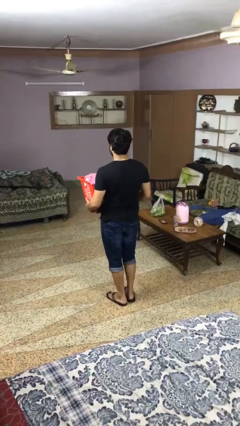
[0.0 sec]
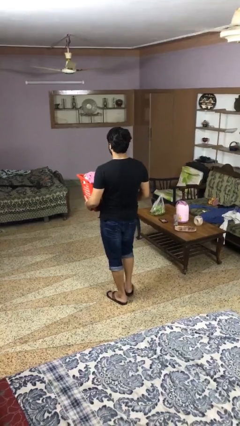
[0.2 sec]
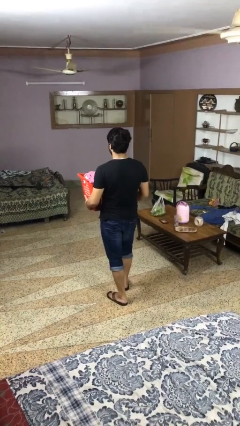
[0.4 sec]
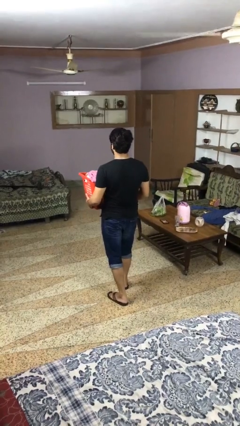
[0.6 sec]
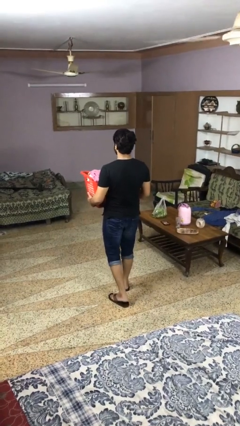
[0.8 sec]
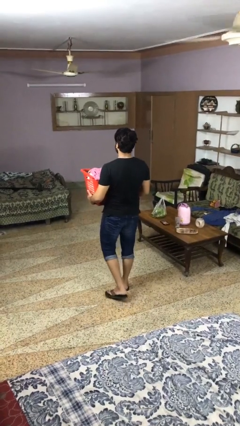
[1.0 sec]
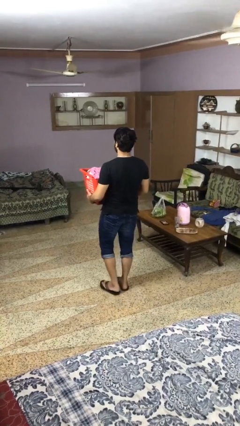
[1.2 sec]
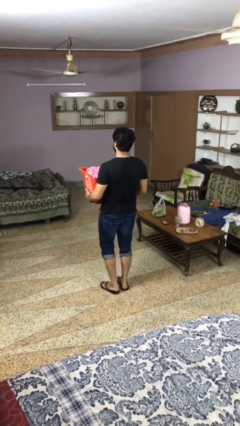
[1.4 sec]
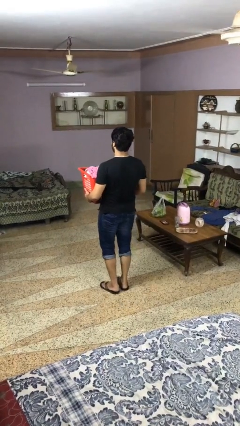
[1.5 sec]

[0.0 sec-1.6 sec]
person carries laundry basket

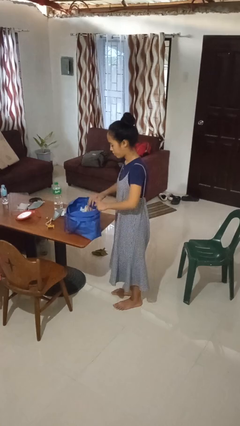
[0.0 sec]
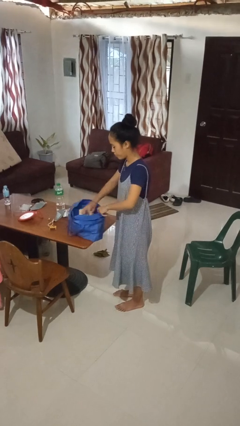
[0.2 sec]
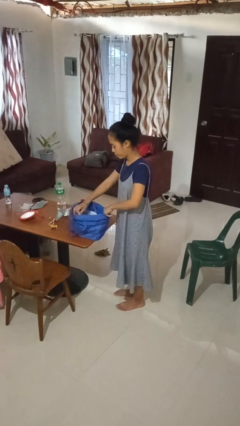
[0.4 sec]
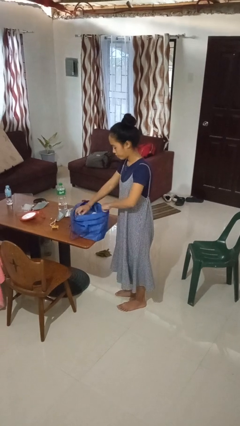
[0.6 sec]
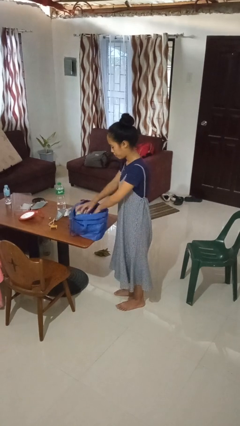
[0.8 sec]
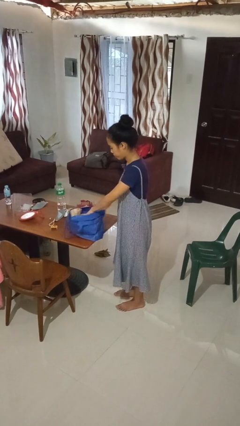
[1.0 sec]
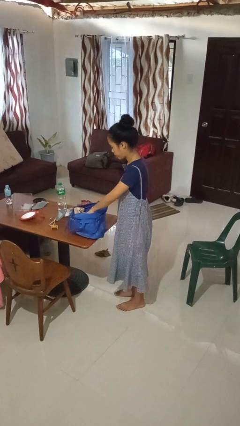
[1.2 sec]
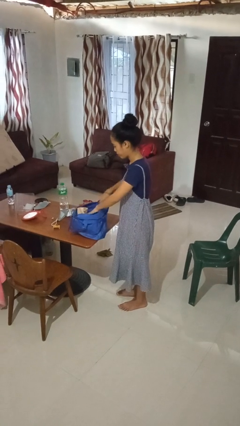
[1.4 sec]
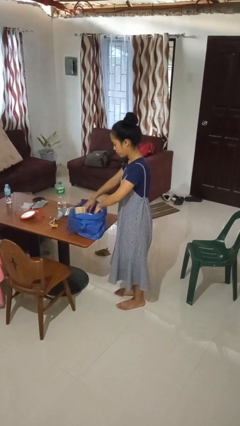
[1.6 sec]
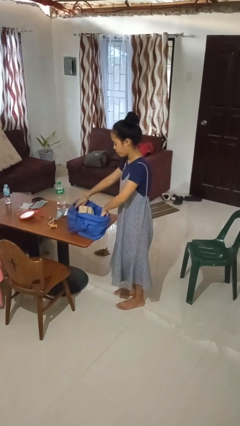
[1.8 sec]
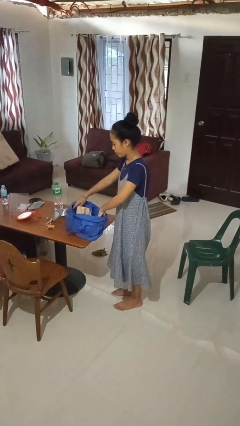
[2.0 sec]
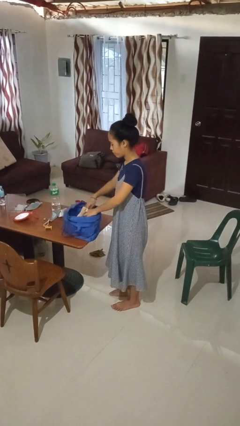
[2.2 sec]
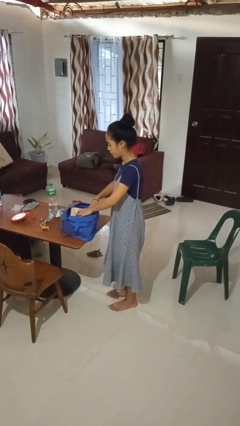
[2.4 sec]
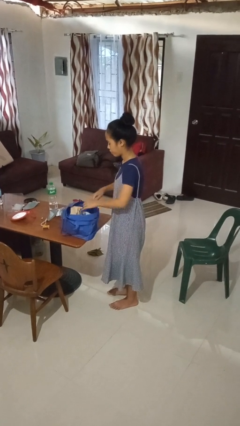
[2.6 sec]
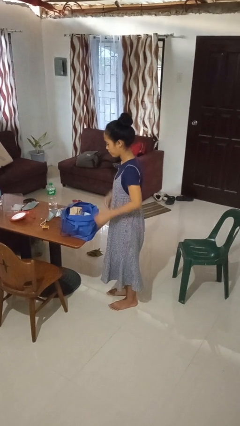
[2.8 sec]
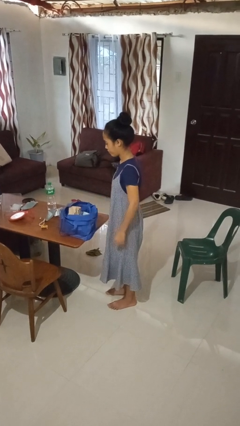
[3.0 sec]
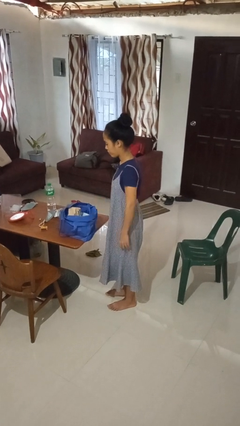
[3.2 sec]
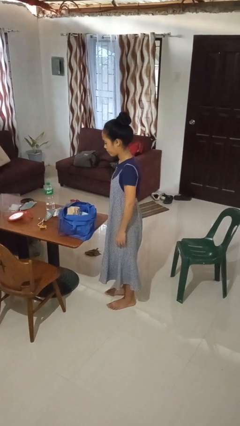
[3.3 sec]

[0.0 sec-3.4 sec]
person searches in bag

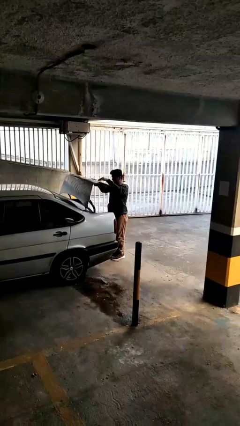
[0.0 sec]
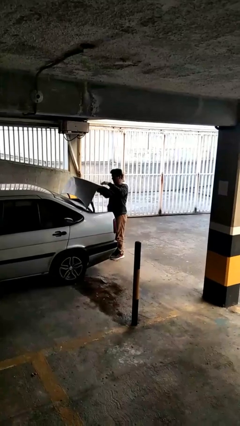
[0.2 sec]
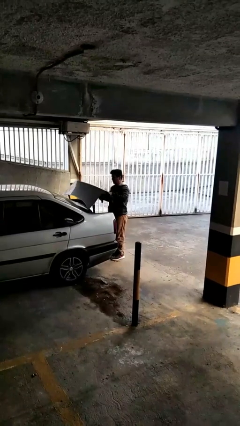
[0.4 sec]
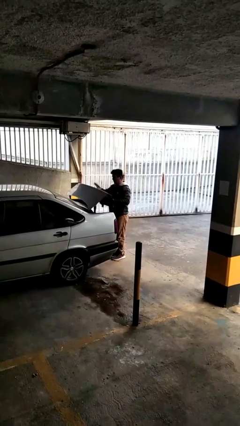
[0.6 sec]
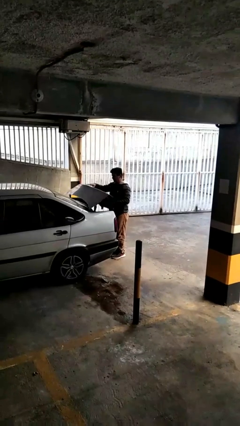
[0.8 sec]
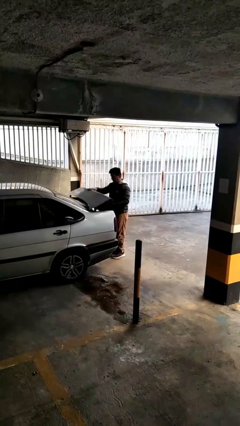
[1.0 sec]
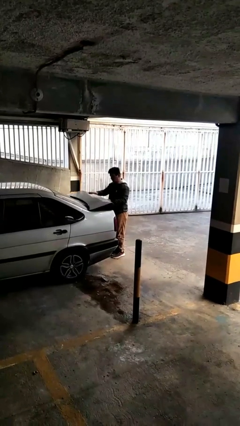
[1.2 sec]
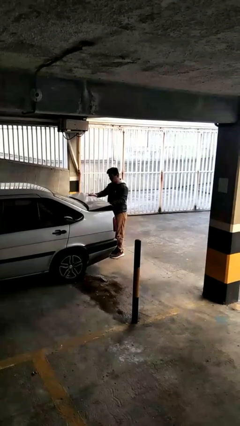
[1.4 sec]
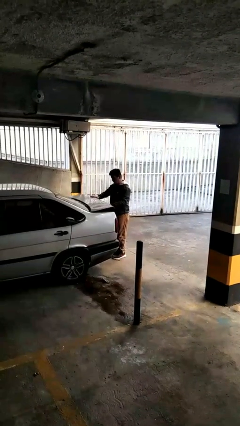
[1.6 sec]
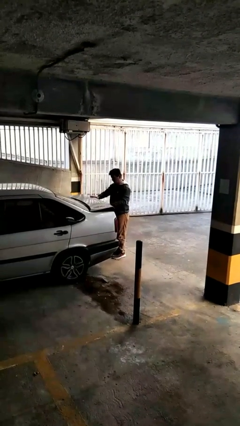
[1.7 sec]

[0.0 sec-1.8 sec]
person closes car trunk

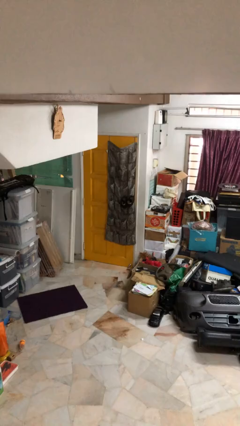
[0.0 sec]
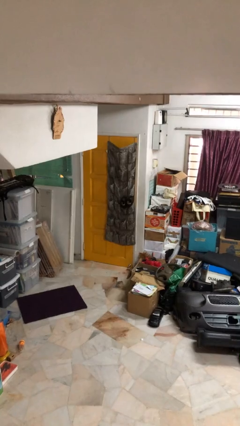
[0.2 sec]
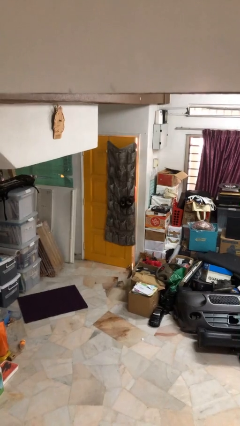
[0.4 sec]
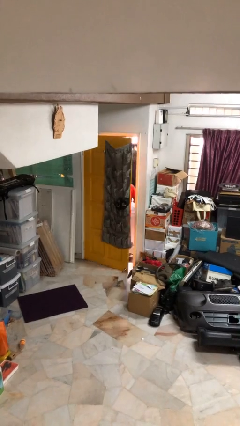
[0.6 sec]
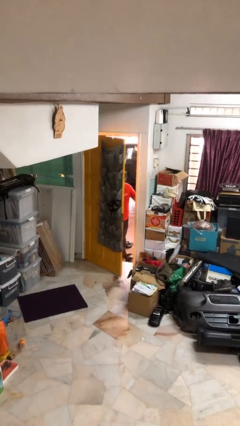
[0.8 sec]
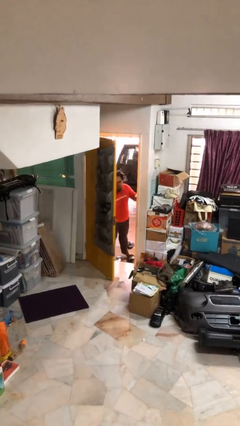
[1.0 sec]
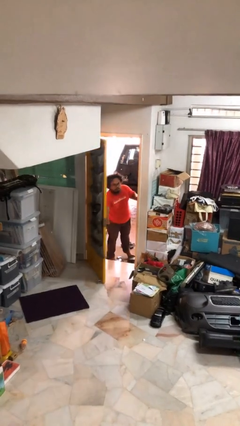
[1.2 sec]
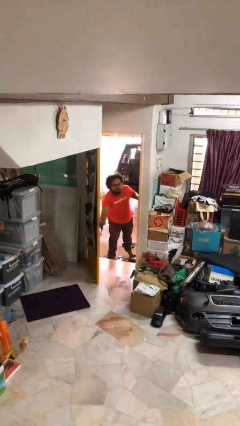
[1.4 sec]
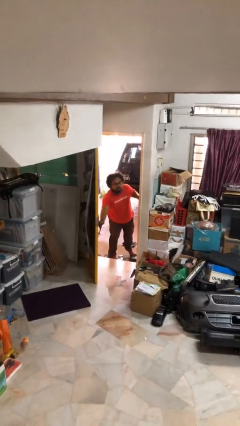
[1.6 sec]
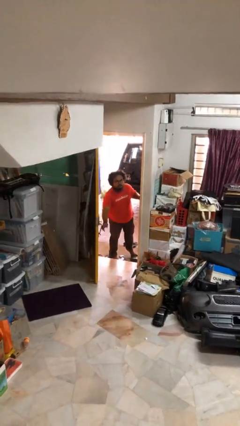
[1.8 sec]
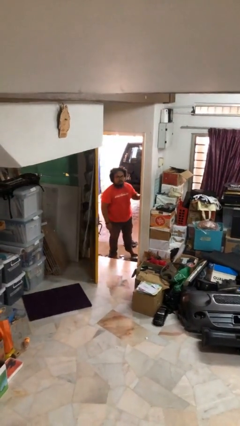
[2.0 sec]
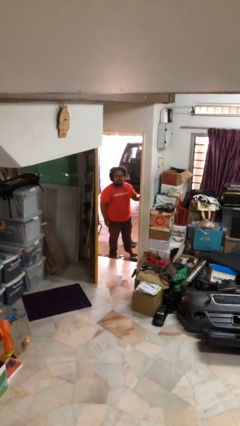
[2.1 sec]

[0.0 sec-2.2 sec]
person opens facility door

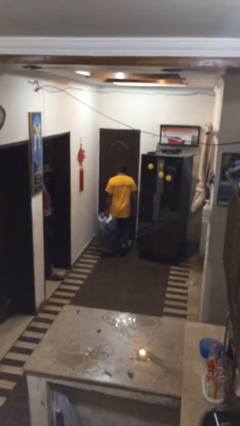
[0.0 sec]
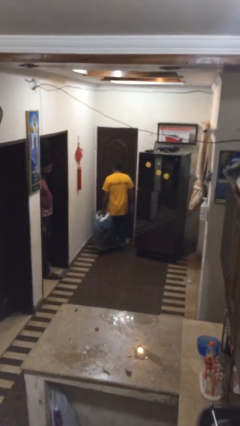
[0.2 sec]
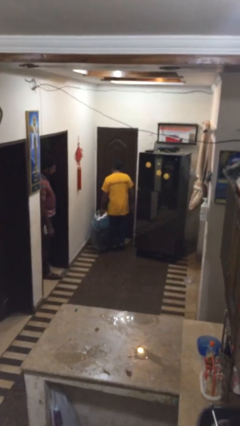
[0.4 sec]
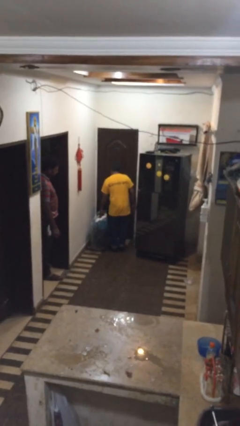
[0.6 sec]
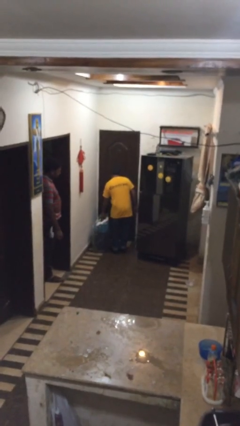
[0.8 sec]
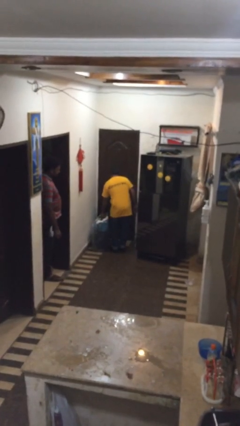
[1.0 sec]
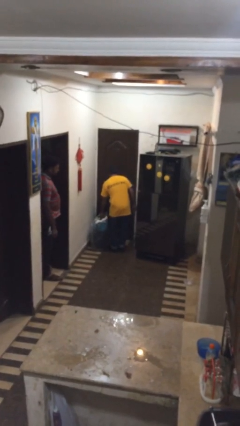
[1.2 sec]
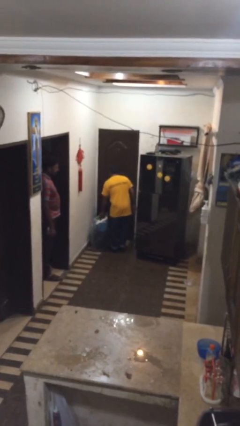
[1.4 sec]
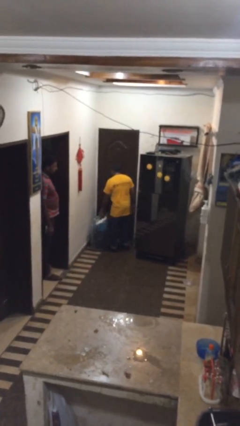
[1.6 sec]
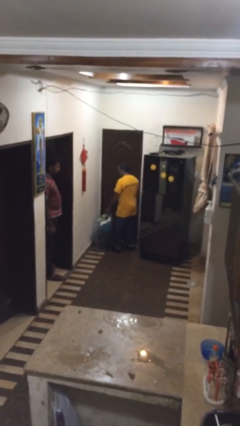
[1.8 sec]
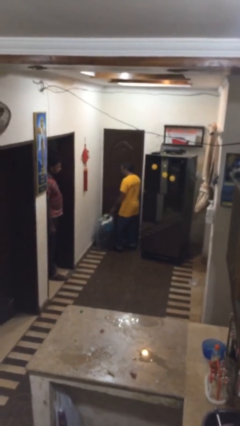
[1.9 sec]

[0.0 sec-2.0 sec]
person puts down object on floor

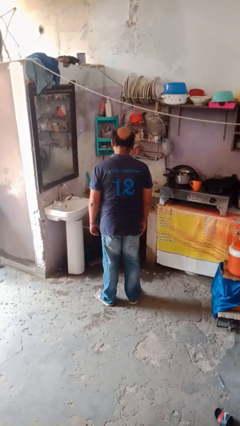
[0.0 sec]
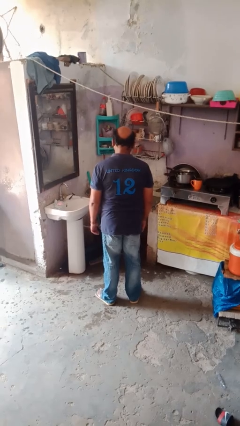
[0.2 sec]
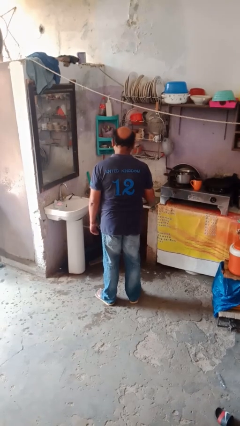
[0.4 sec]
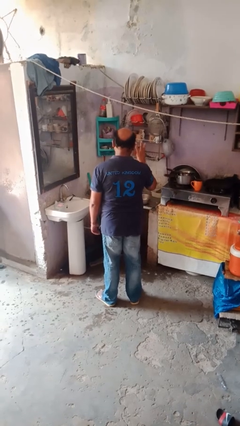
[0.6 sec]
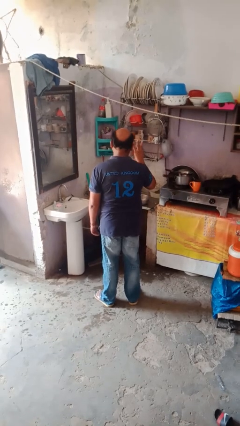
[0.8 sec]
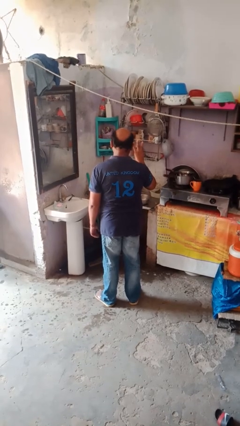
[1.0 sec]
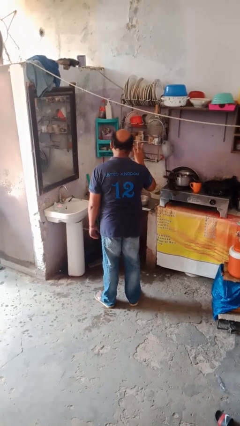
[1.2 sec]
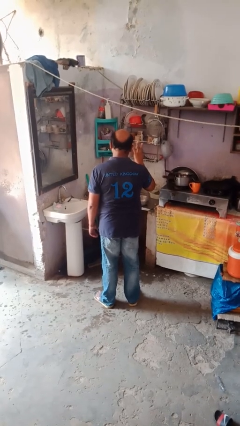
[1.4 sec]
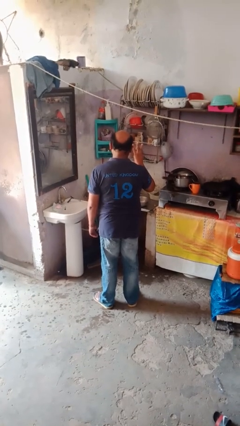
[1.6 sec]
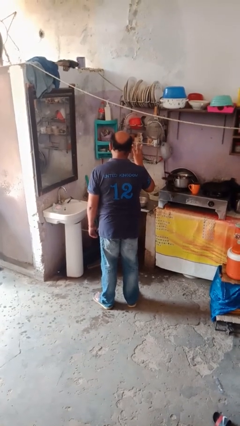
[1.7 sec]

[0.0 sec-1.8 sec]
person gestures number three

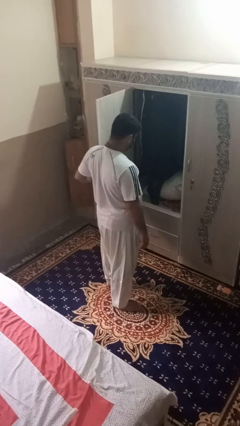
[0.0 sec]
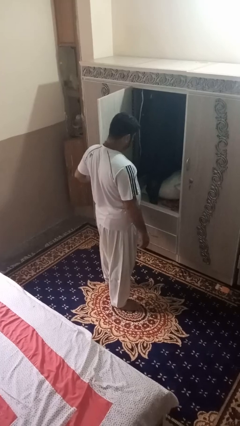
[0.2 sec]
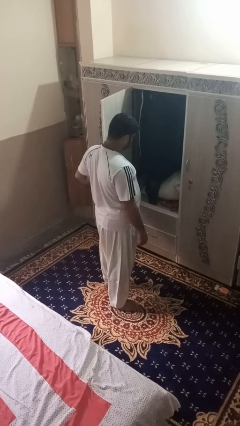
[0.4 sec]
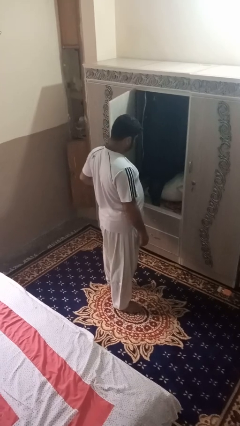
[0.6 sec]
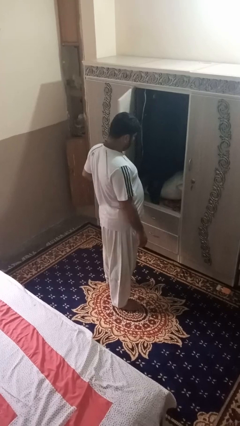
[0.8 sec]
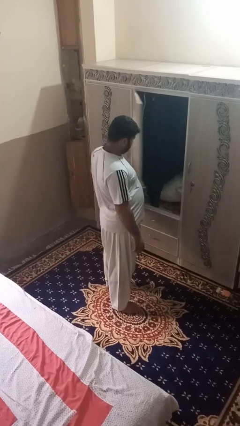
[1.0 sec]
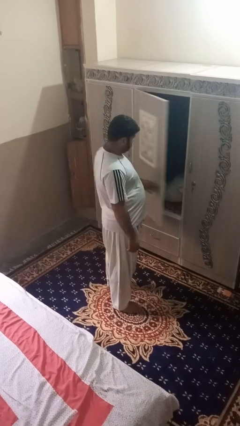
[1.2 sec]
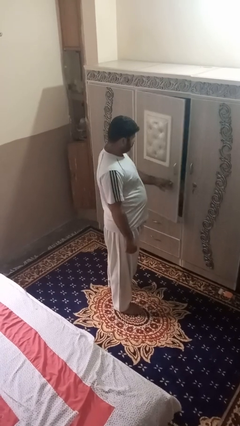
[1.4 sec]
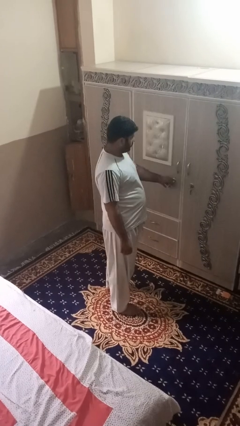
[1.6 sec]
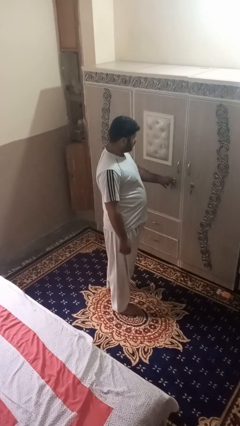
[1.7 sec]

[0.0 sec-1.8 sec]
person closes dresser drawer

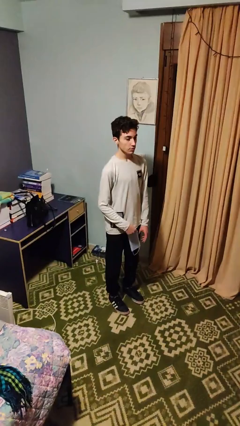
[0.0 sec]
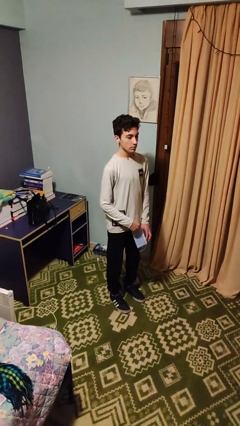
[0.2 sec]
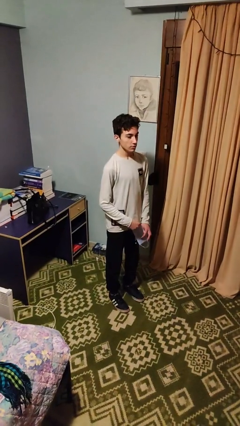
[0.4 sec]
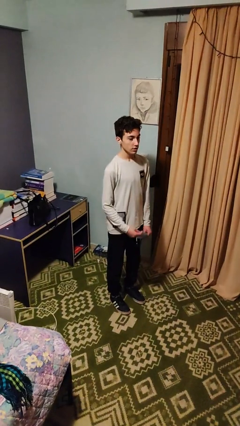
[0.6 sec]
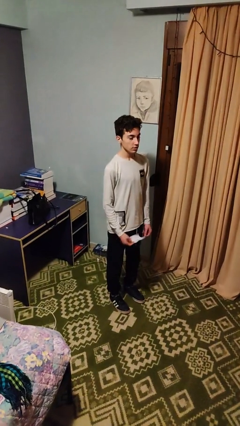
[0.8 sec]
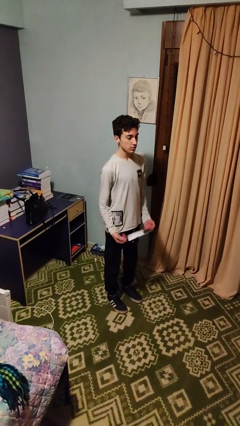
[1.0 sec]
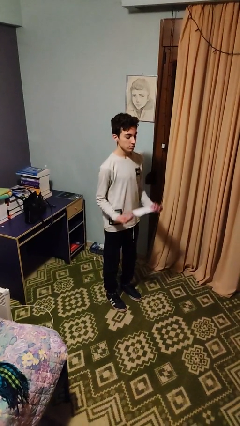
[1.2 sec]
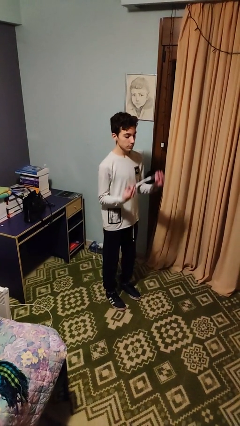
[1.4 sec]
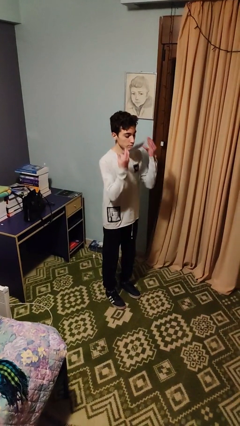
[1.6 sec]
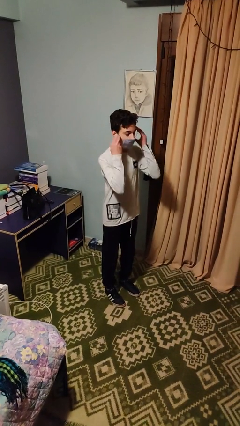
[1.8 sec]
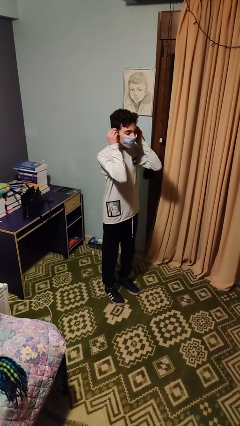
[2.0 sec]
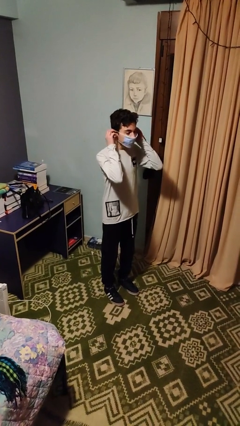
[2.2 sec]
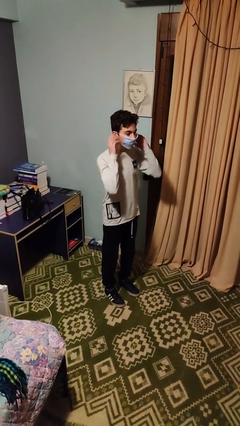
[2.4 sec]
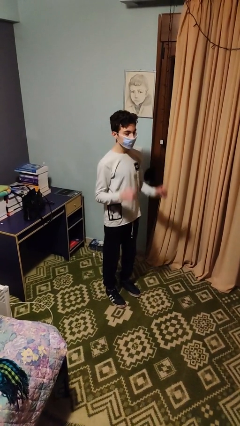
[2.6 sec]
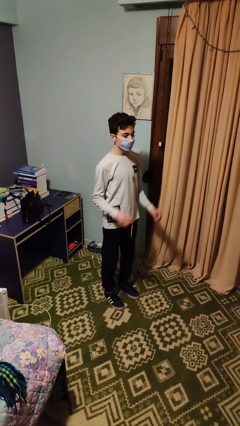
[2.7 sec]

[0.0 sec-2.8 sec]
person puts on facemask
